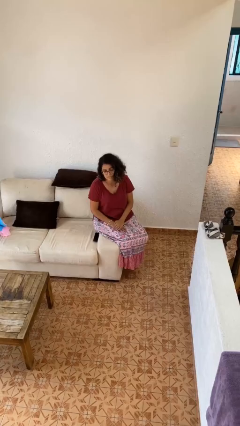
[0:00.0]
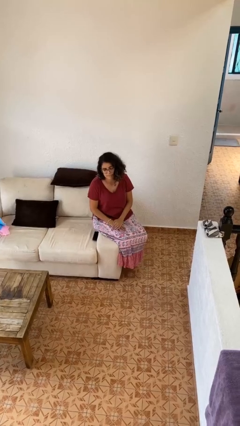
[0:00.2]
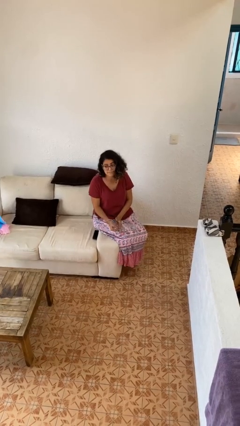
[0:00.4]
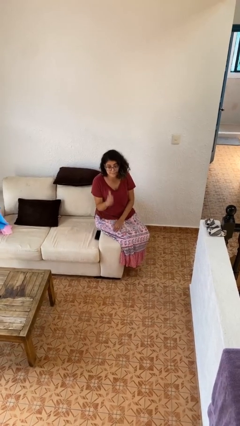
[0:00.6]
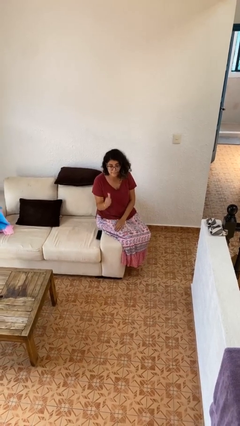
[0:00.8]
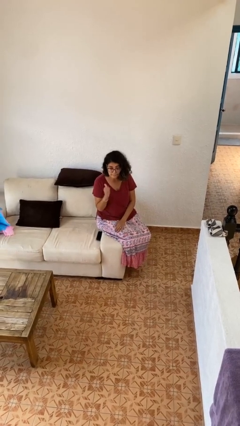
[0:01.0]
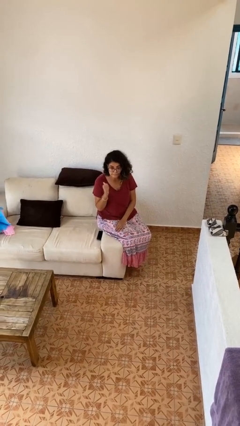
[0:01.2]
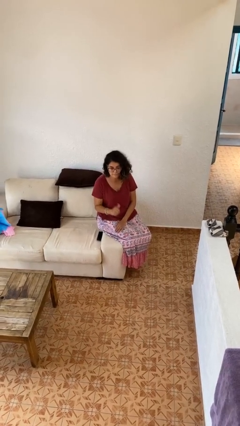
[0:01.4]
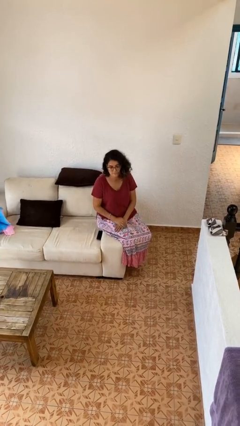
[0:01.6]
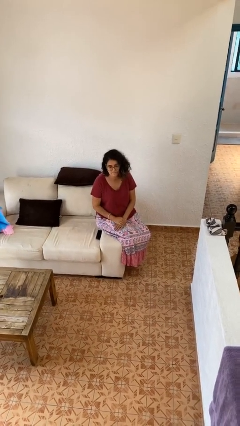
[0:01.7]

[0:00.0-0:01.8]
person gestures behind me

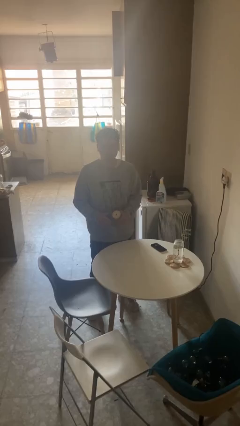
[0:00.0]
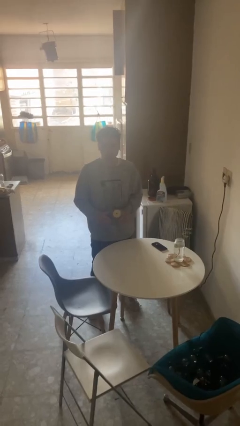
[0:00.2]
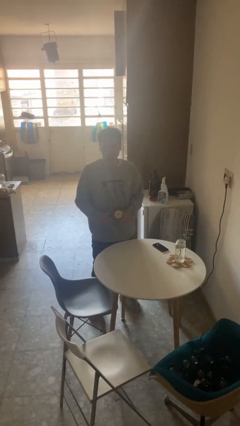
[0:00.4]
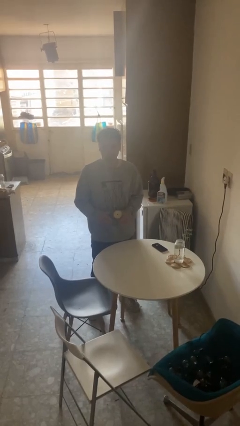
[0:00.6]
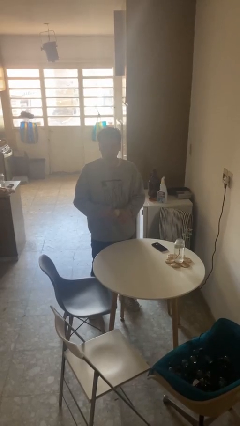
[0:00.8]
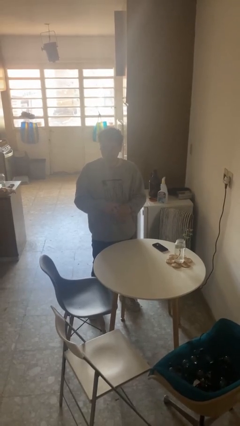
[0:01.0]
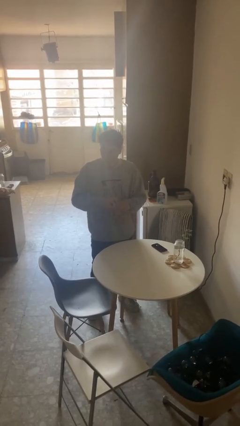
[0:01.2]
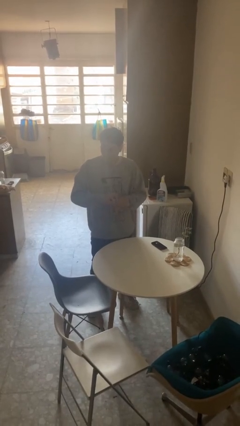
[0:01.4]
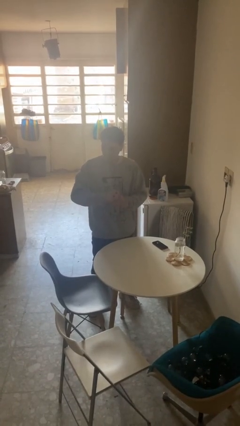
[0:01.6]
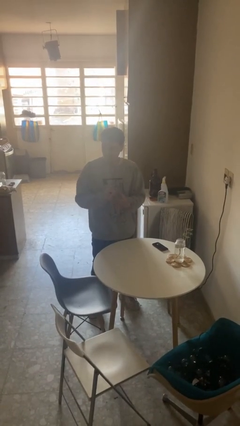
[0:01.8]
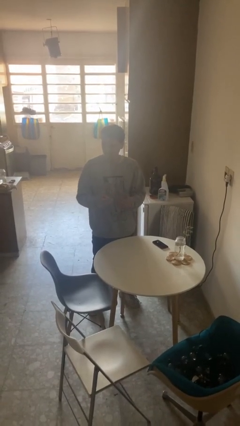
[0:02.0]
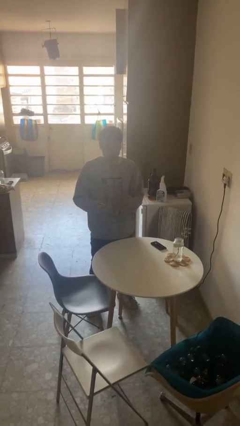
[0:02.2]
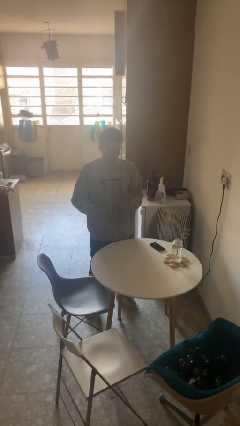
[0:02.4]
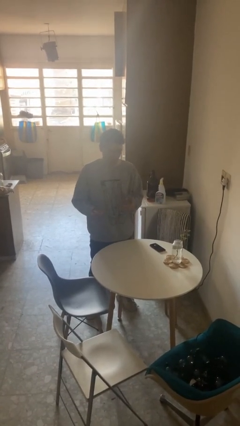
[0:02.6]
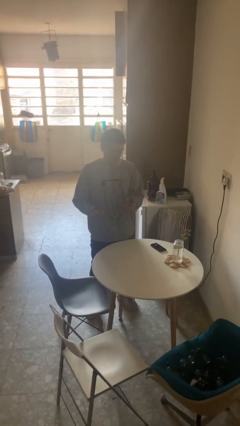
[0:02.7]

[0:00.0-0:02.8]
person opens jar

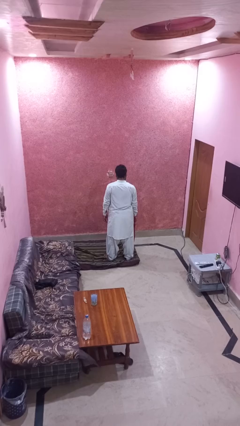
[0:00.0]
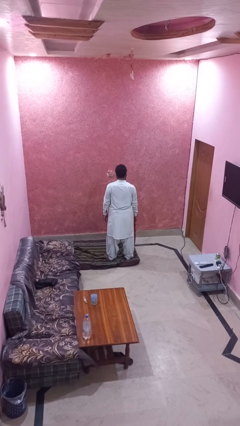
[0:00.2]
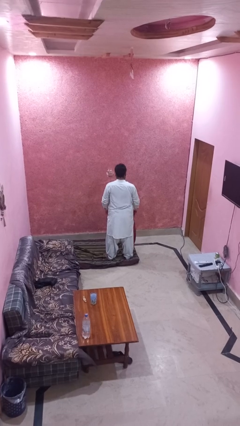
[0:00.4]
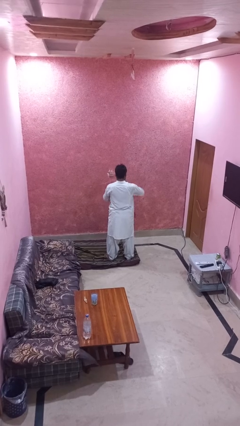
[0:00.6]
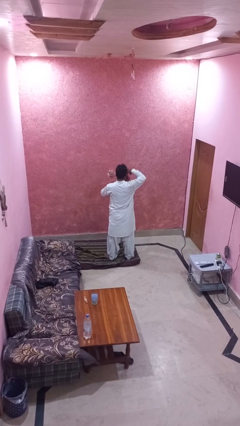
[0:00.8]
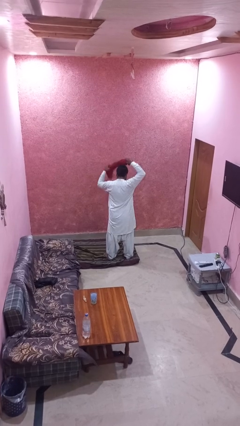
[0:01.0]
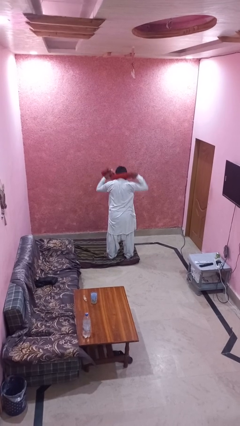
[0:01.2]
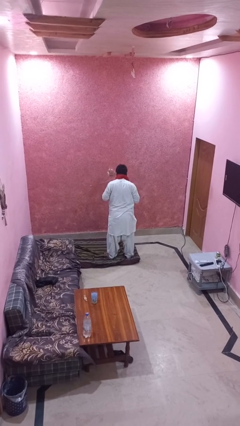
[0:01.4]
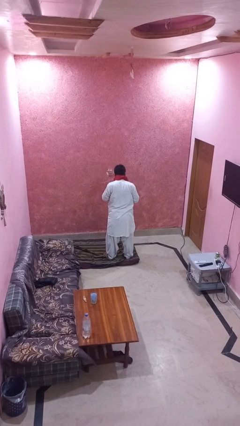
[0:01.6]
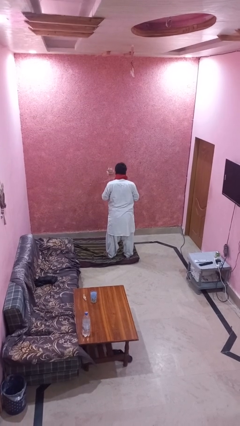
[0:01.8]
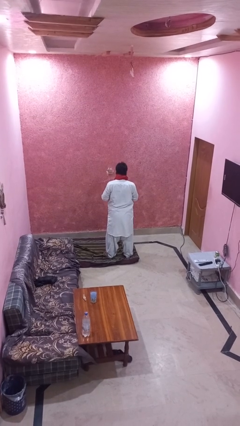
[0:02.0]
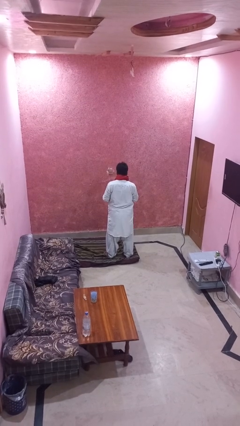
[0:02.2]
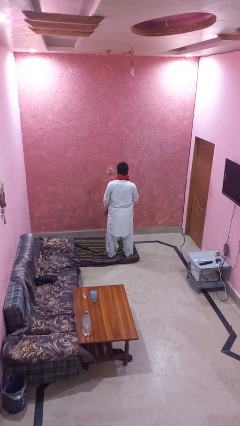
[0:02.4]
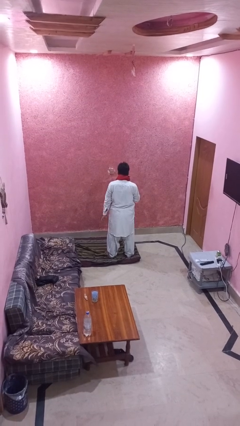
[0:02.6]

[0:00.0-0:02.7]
person puts on scarf

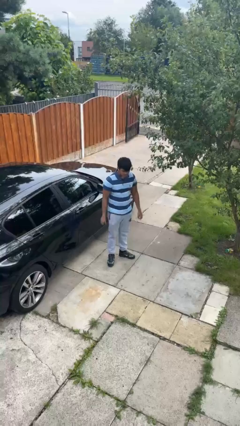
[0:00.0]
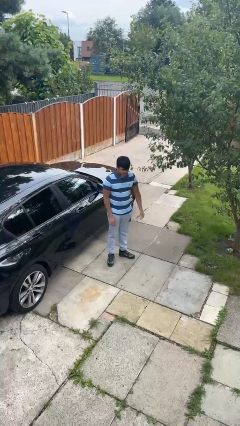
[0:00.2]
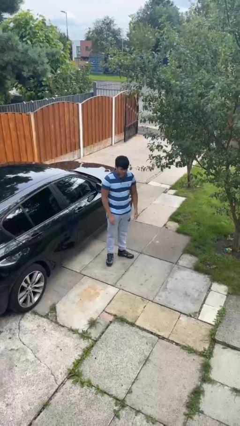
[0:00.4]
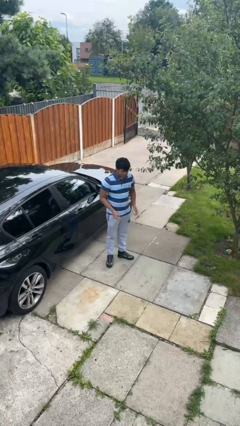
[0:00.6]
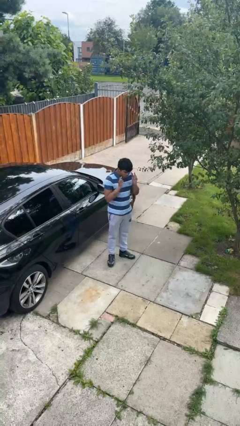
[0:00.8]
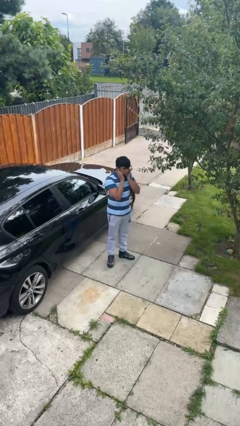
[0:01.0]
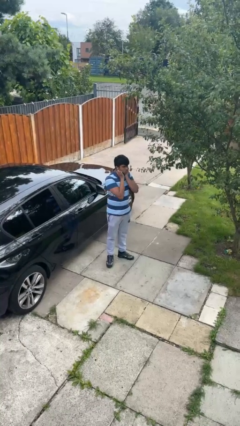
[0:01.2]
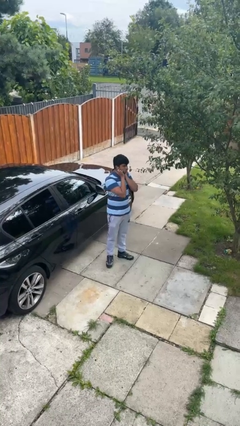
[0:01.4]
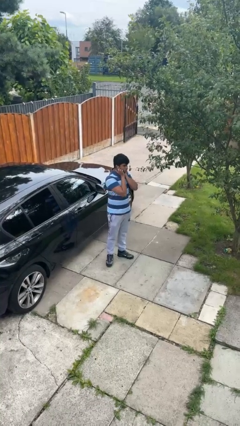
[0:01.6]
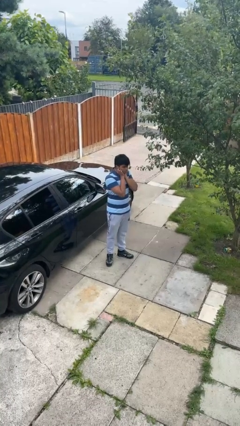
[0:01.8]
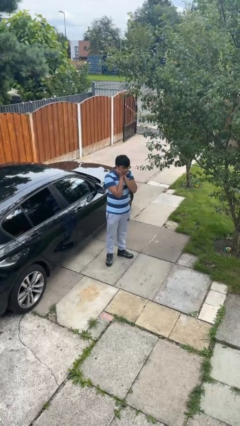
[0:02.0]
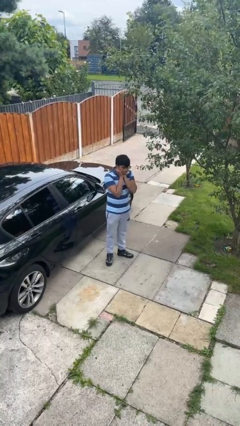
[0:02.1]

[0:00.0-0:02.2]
person puts fingers in ear

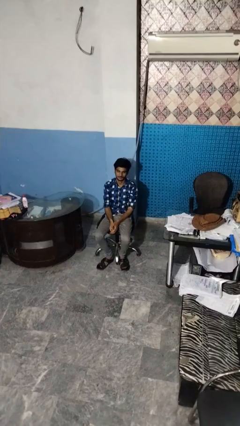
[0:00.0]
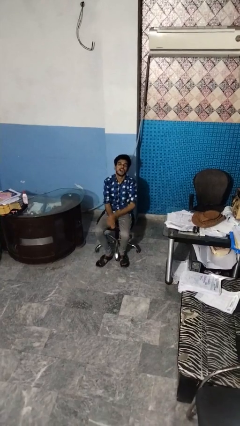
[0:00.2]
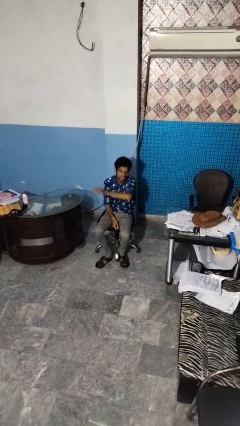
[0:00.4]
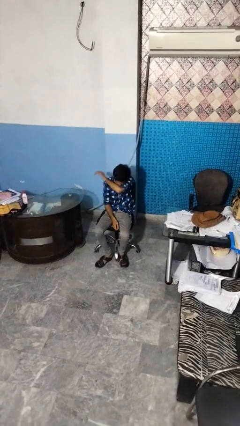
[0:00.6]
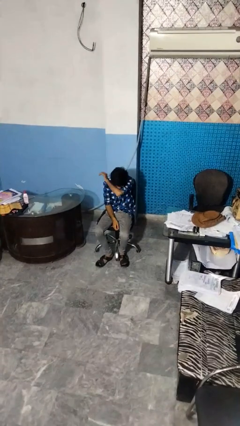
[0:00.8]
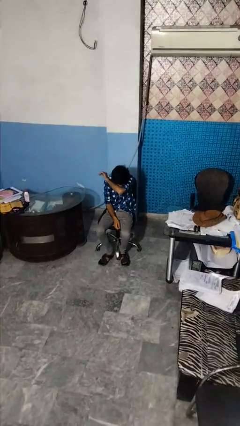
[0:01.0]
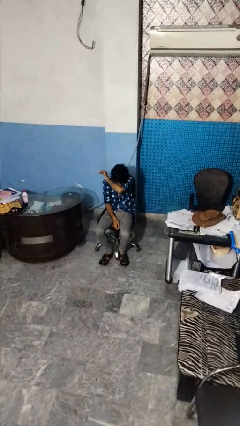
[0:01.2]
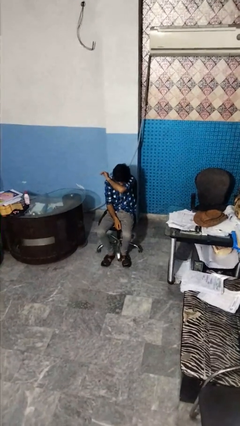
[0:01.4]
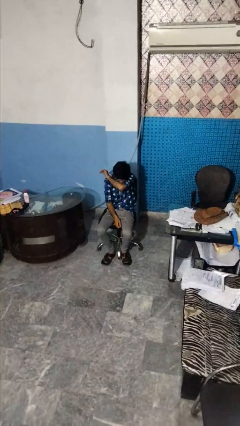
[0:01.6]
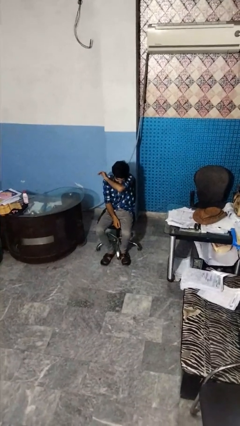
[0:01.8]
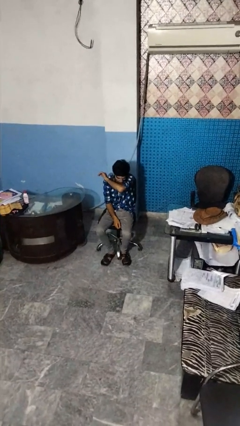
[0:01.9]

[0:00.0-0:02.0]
person sneezes into arm

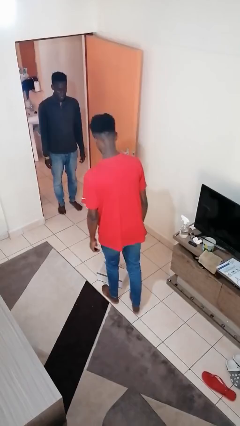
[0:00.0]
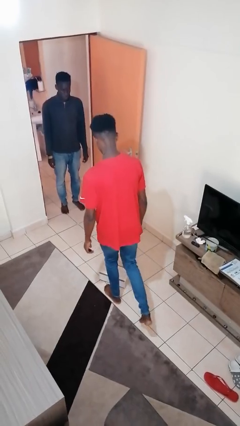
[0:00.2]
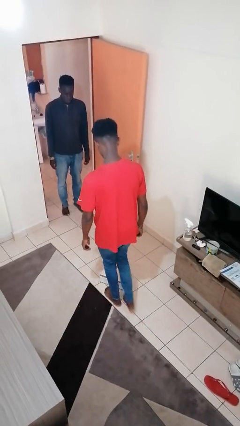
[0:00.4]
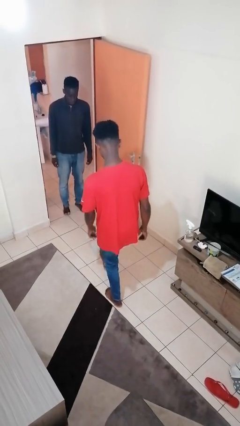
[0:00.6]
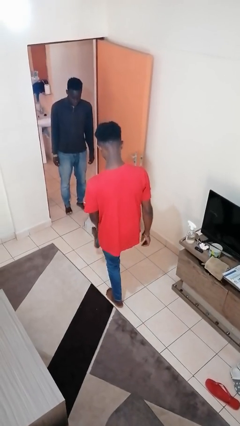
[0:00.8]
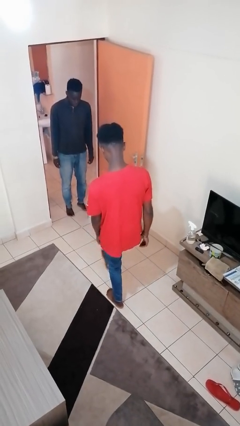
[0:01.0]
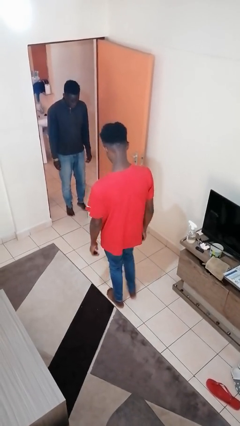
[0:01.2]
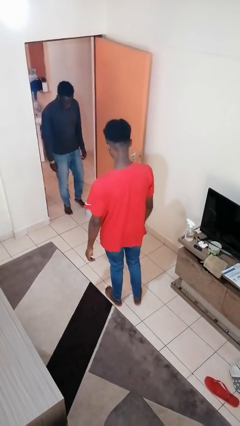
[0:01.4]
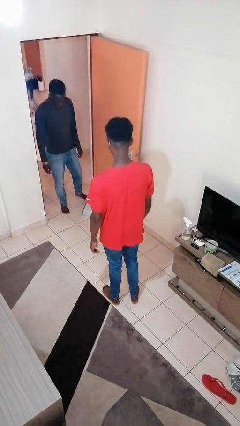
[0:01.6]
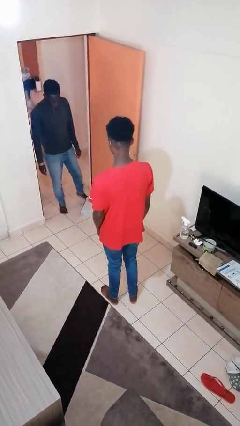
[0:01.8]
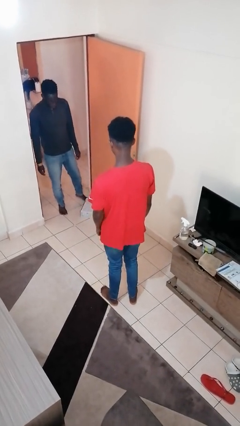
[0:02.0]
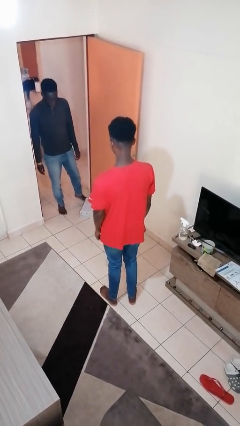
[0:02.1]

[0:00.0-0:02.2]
person kicks object to person

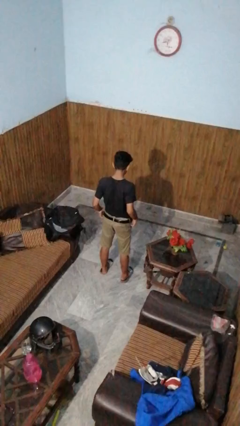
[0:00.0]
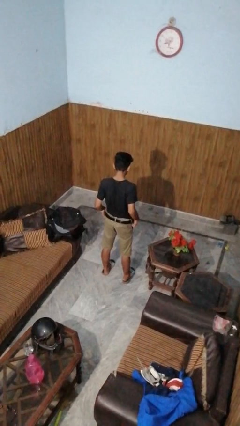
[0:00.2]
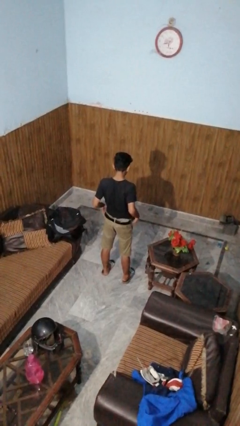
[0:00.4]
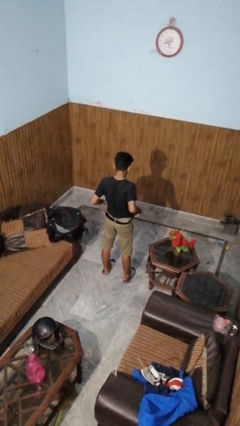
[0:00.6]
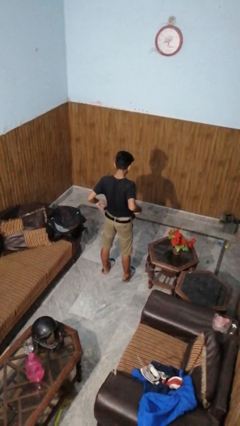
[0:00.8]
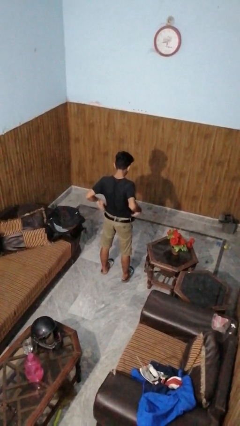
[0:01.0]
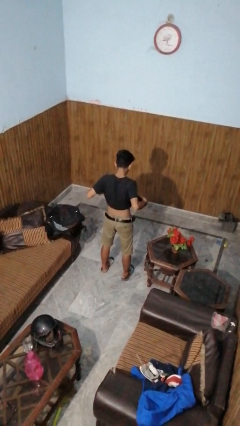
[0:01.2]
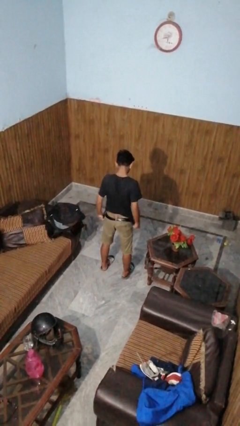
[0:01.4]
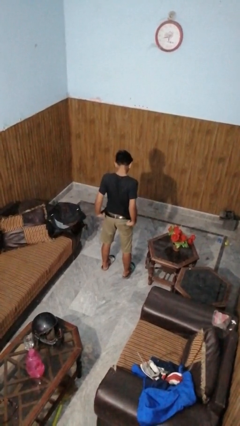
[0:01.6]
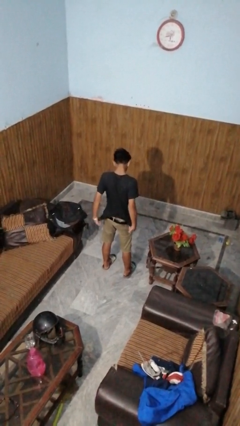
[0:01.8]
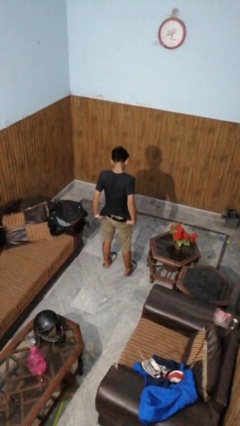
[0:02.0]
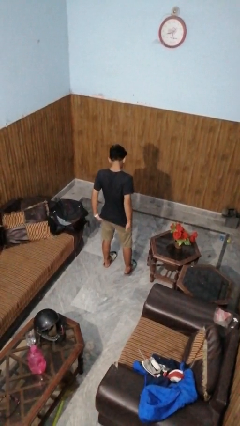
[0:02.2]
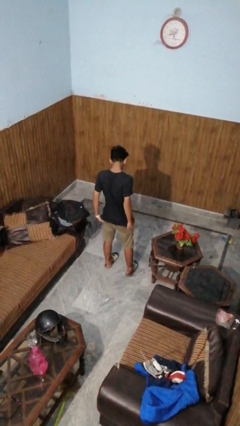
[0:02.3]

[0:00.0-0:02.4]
person untucks shirt

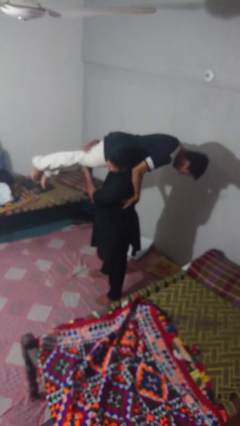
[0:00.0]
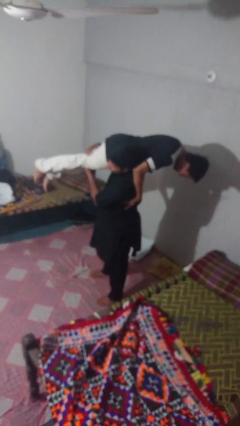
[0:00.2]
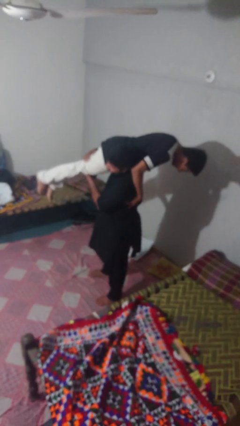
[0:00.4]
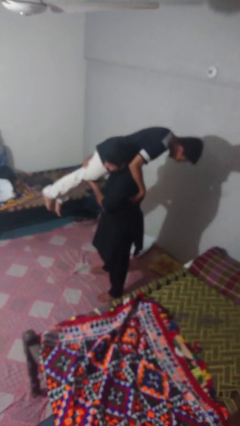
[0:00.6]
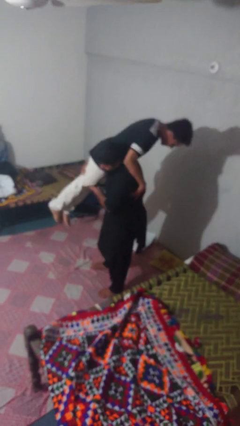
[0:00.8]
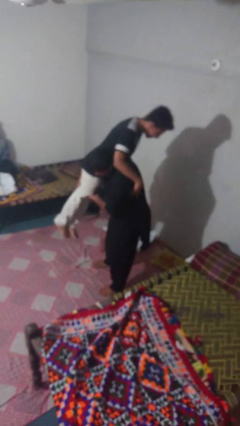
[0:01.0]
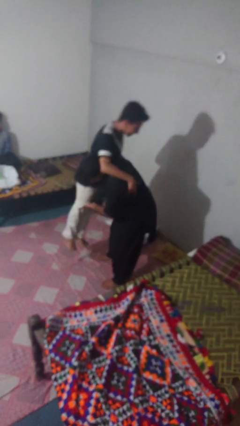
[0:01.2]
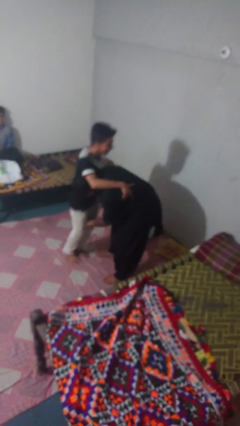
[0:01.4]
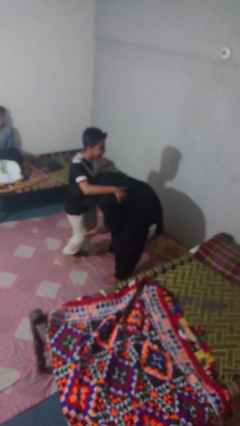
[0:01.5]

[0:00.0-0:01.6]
person puts down person
